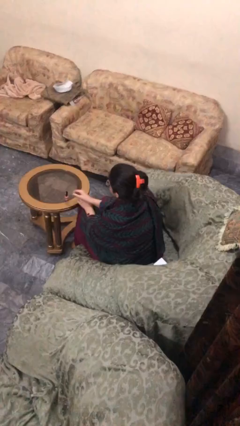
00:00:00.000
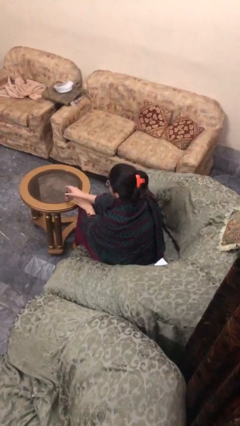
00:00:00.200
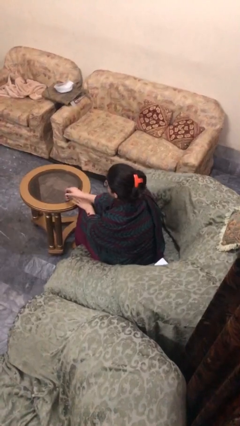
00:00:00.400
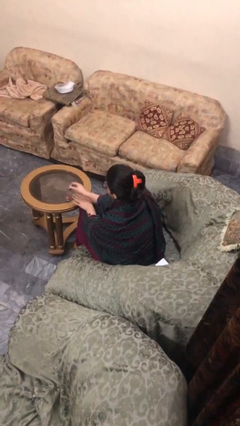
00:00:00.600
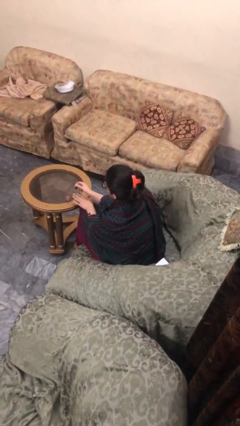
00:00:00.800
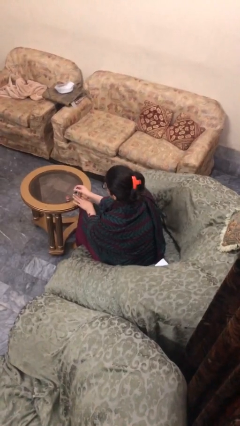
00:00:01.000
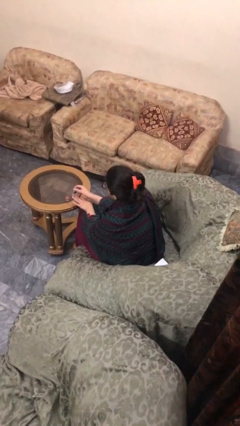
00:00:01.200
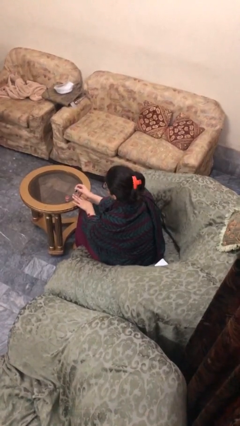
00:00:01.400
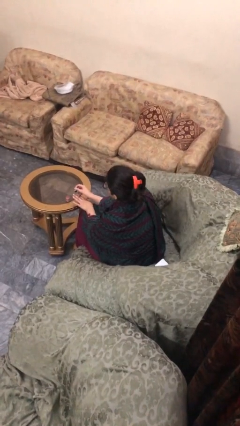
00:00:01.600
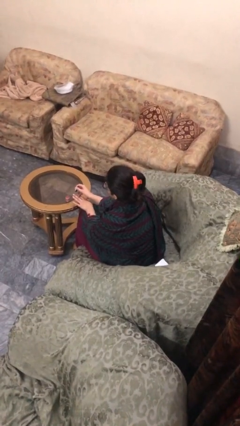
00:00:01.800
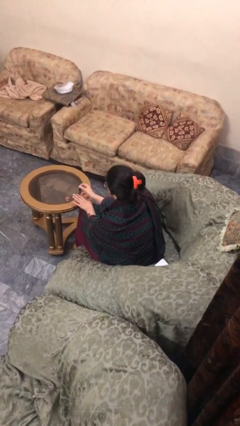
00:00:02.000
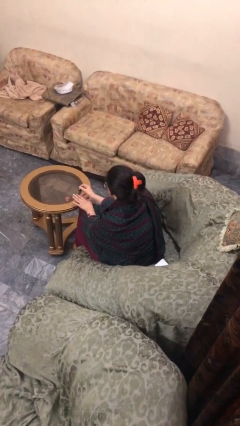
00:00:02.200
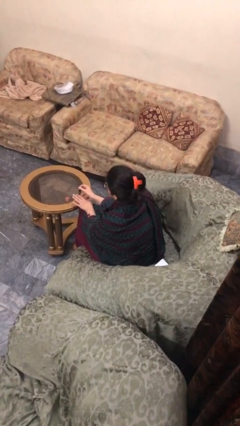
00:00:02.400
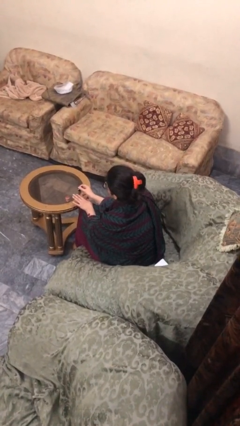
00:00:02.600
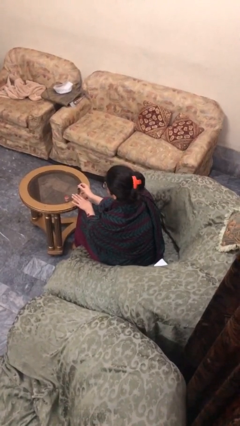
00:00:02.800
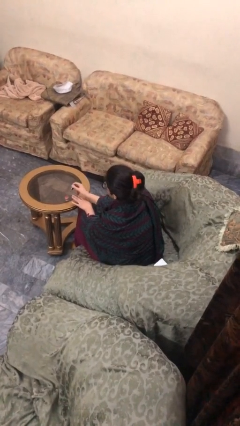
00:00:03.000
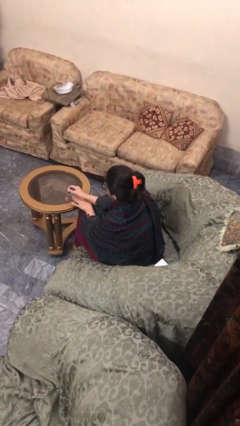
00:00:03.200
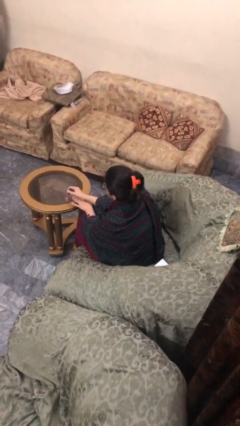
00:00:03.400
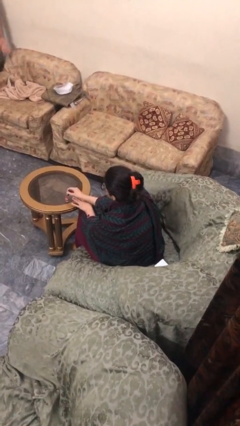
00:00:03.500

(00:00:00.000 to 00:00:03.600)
person paints fingernails

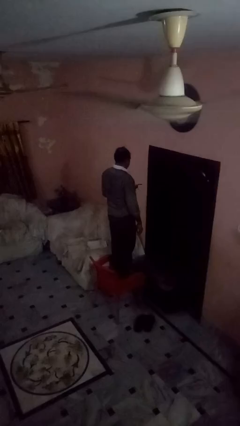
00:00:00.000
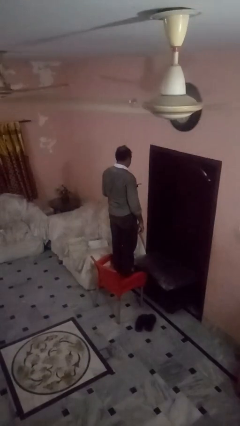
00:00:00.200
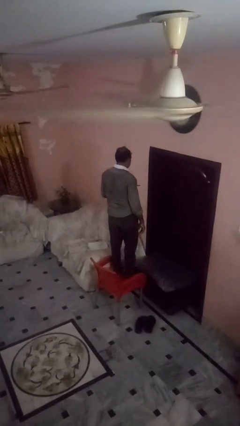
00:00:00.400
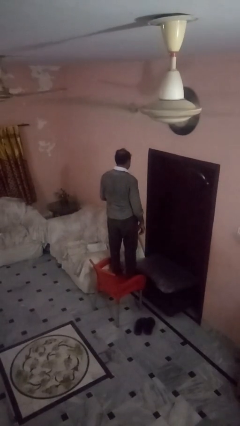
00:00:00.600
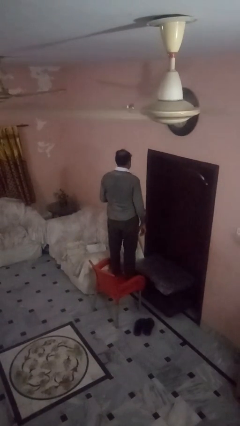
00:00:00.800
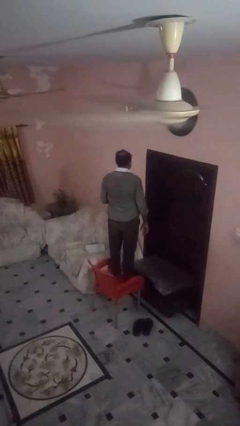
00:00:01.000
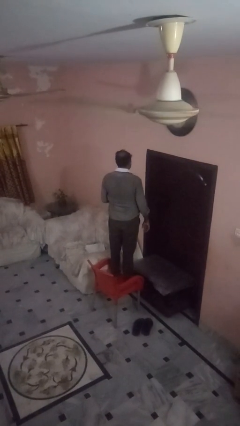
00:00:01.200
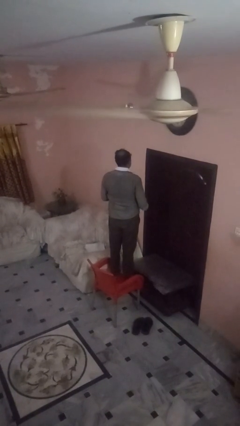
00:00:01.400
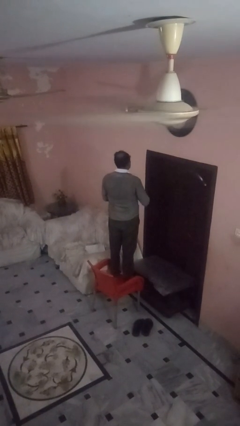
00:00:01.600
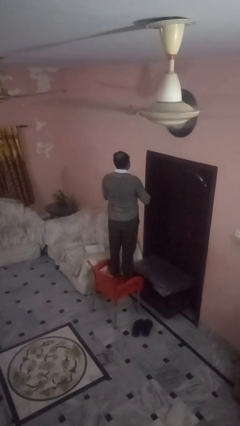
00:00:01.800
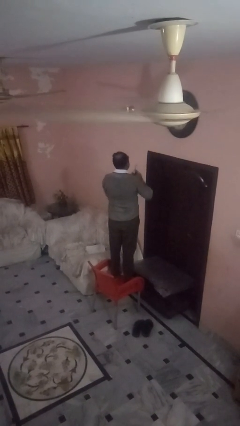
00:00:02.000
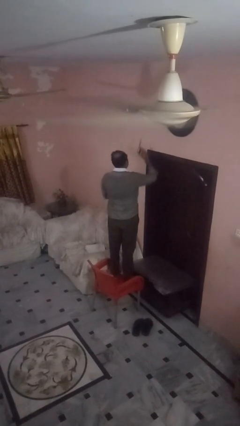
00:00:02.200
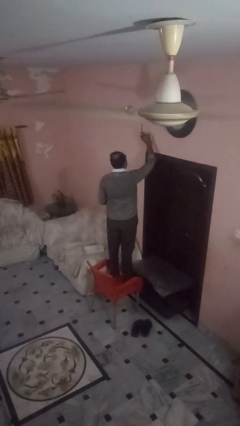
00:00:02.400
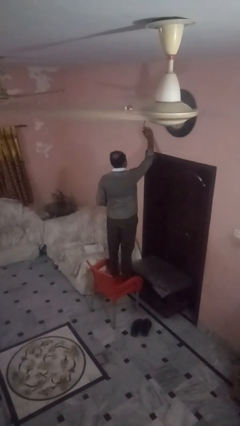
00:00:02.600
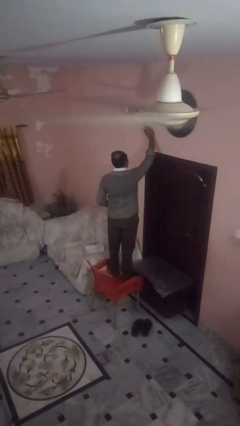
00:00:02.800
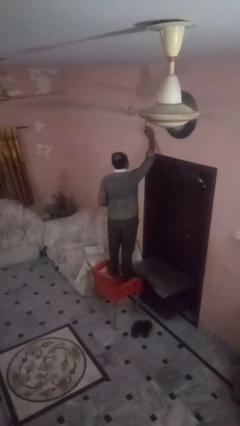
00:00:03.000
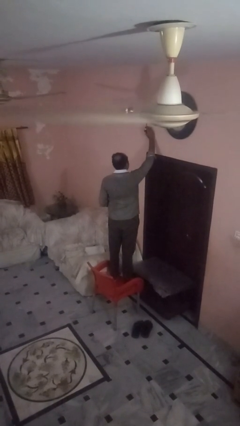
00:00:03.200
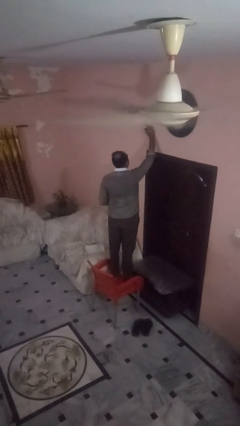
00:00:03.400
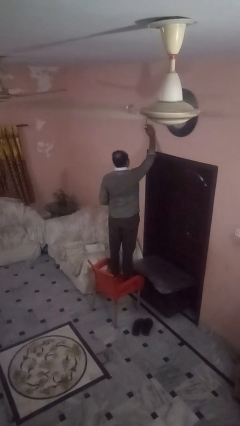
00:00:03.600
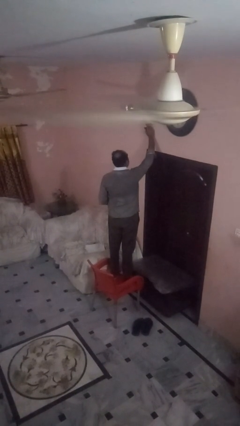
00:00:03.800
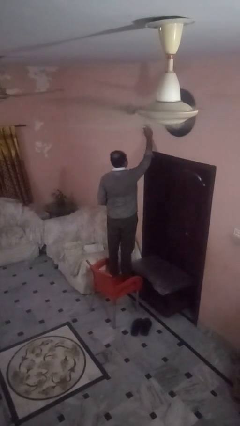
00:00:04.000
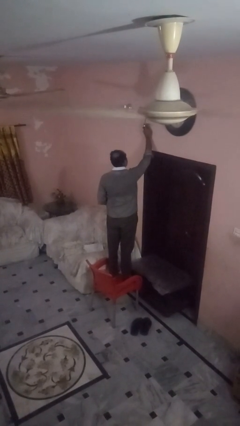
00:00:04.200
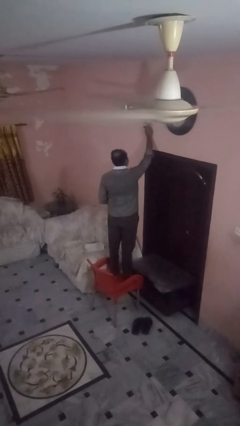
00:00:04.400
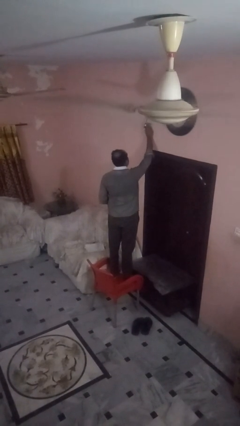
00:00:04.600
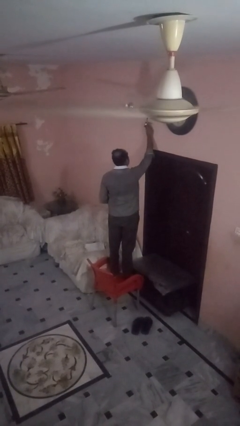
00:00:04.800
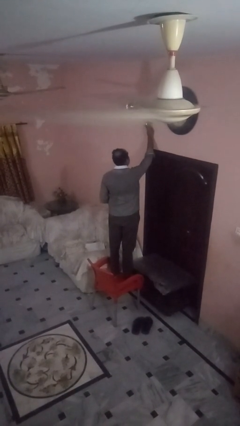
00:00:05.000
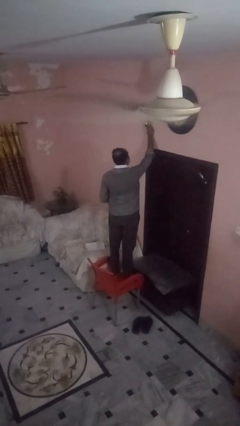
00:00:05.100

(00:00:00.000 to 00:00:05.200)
person puts up smoke detector

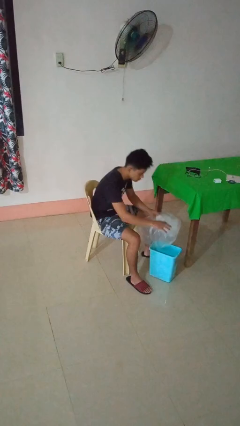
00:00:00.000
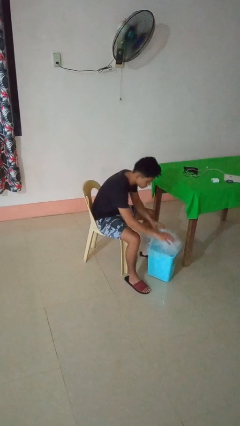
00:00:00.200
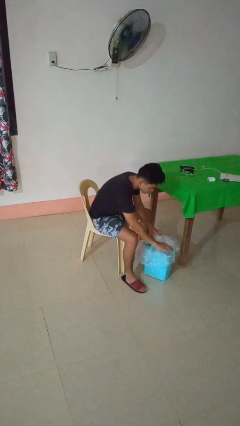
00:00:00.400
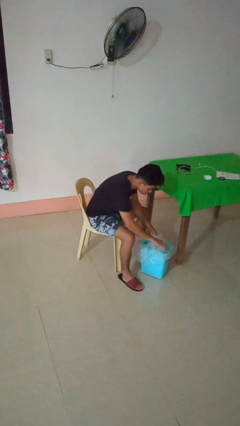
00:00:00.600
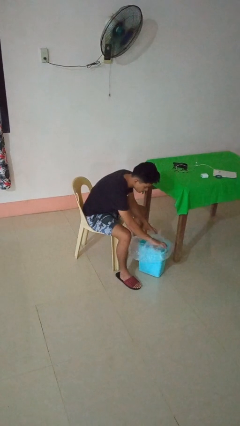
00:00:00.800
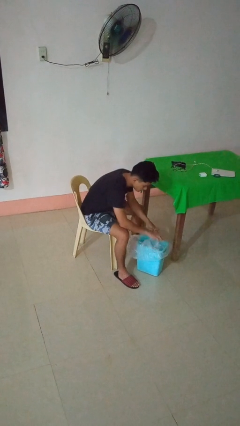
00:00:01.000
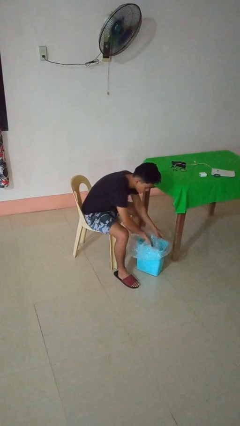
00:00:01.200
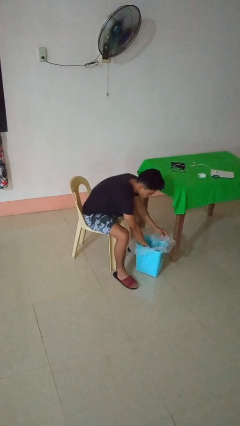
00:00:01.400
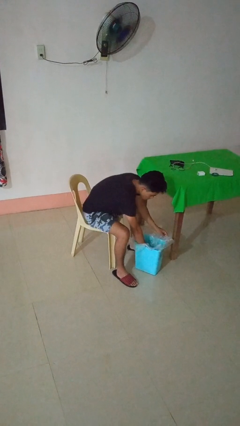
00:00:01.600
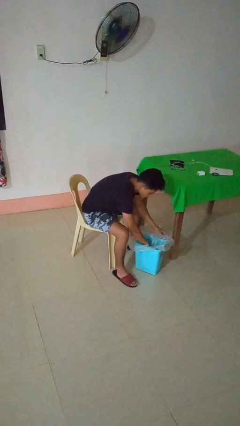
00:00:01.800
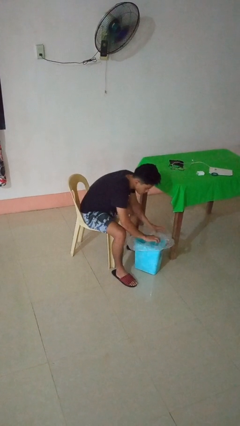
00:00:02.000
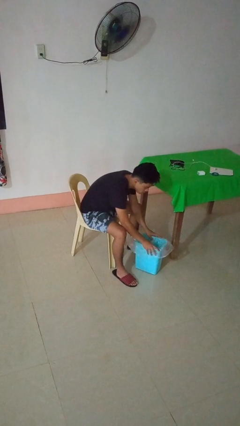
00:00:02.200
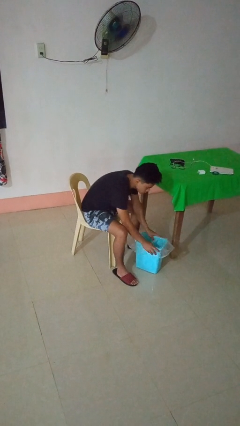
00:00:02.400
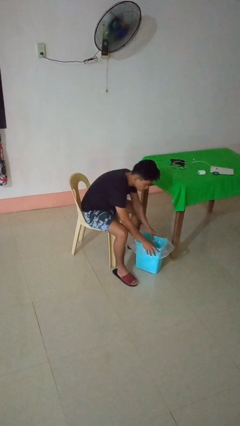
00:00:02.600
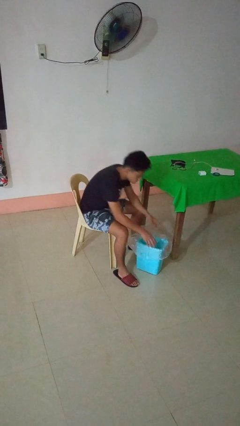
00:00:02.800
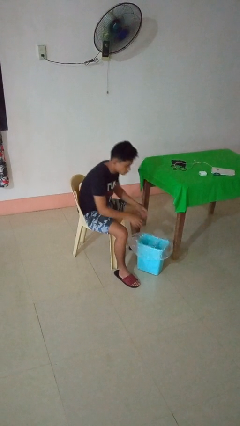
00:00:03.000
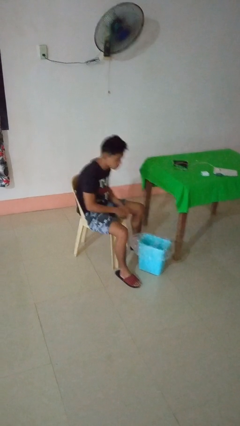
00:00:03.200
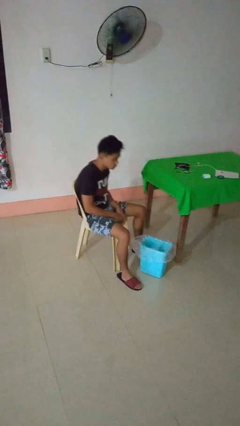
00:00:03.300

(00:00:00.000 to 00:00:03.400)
person inserts trashbag into trashcan

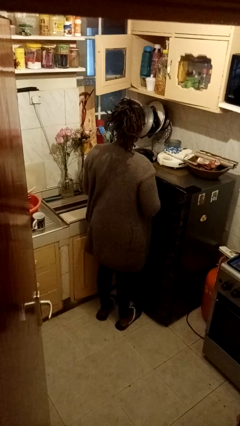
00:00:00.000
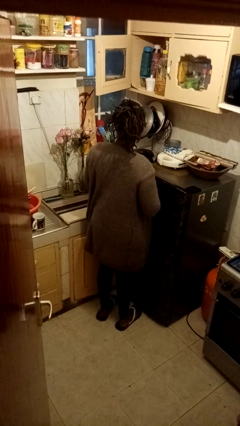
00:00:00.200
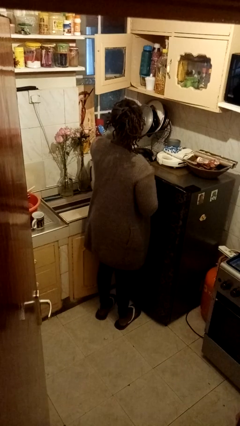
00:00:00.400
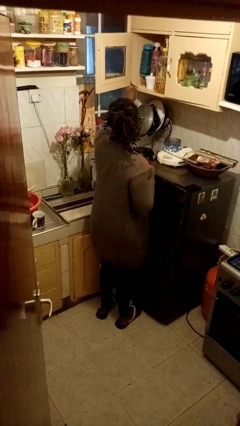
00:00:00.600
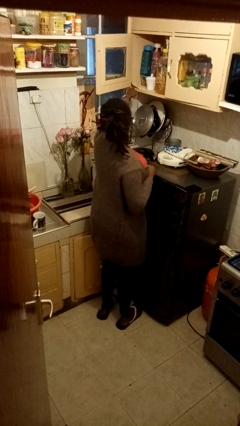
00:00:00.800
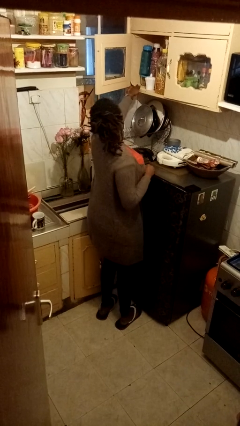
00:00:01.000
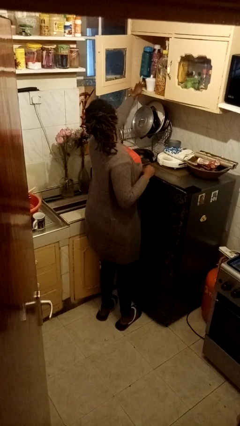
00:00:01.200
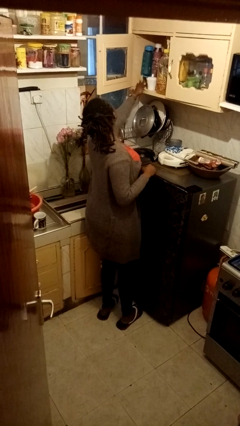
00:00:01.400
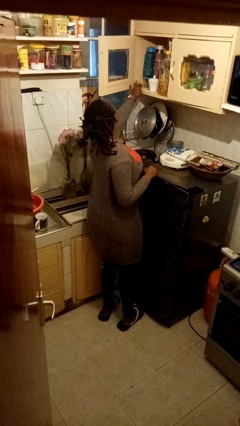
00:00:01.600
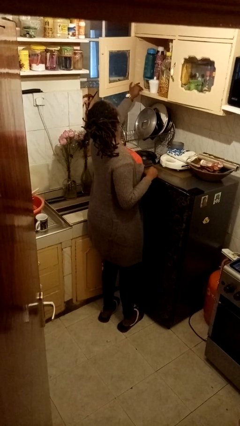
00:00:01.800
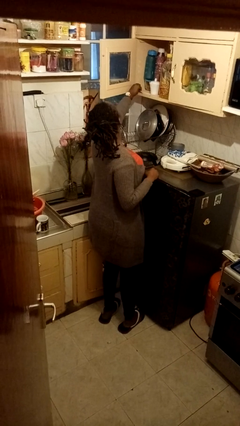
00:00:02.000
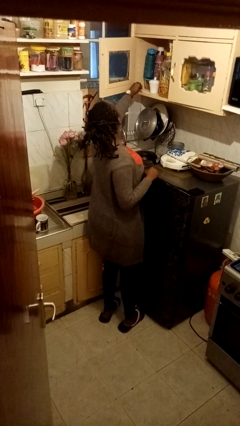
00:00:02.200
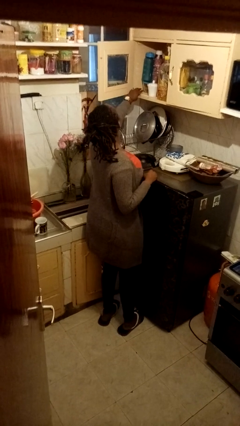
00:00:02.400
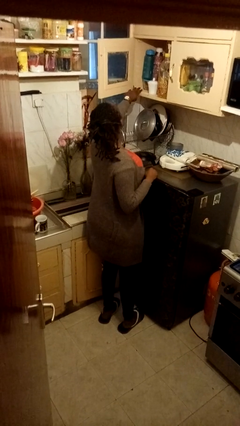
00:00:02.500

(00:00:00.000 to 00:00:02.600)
person searches in cabinet

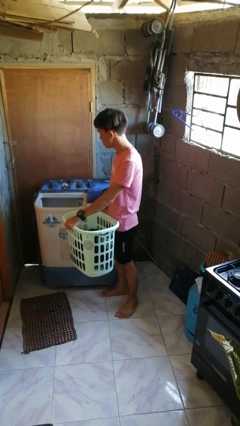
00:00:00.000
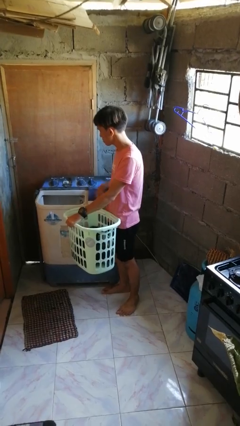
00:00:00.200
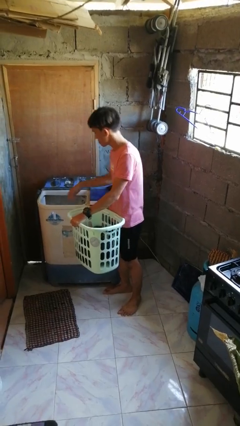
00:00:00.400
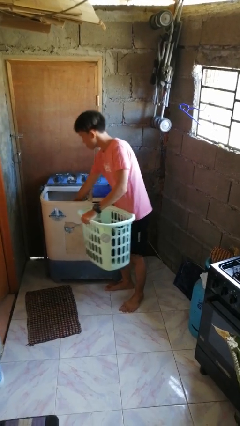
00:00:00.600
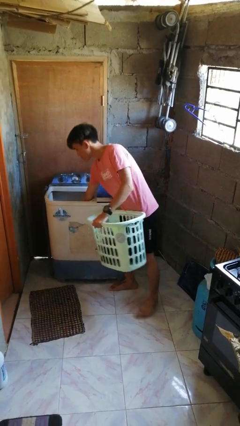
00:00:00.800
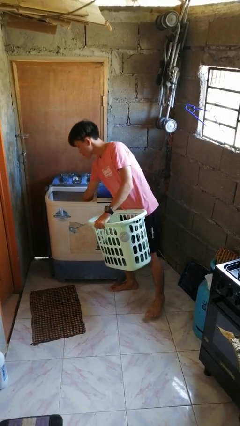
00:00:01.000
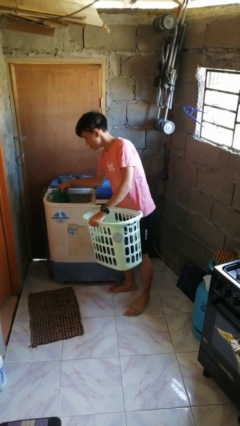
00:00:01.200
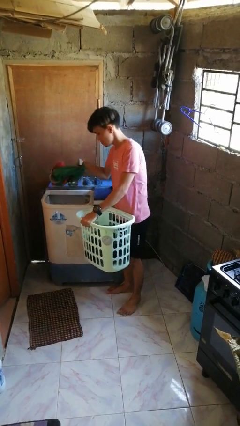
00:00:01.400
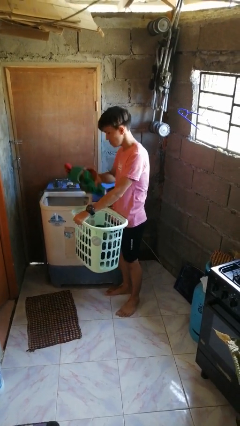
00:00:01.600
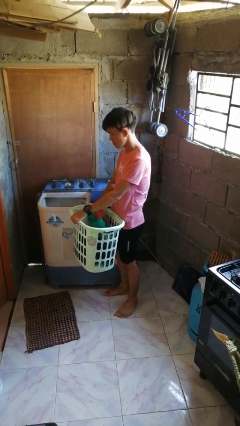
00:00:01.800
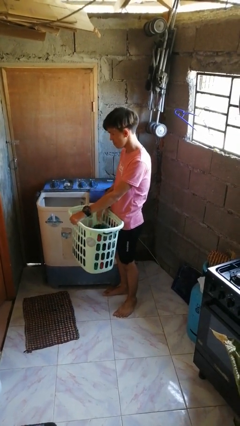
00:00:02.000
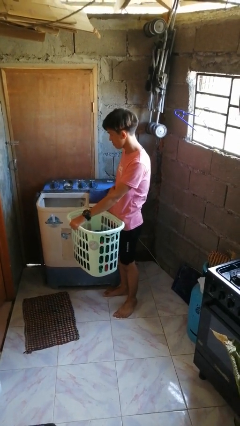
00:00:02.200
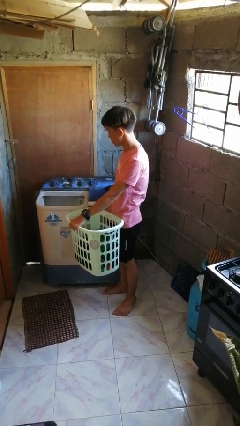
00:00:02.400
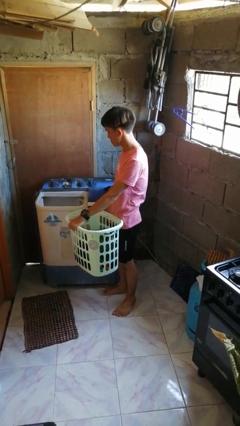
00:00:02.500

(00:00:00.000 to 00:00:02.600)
person loads clotheswasher
